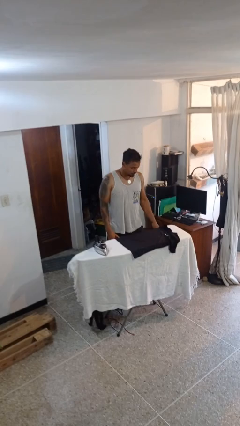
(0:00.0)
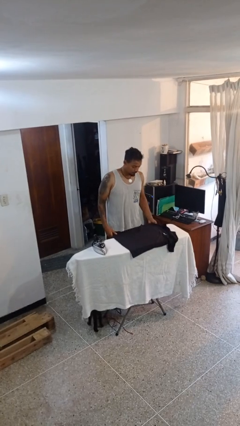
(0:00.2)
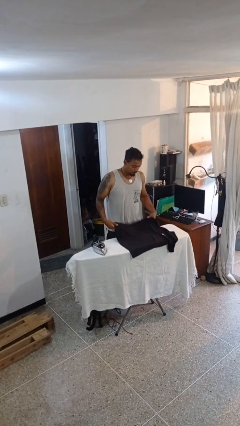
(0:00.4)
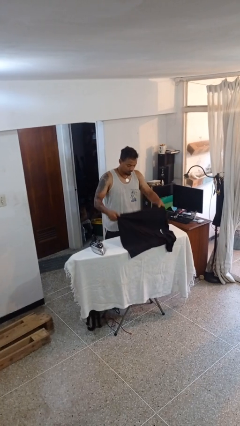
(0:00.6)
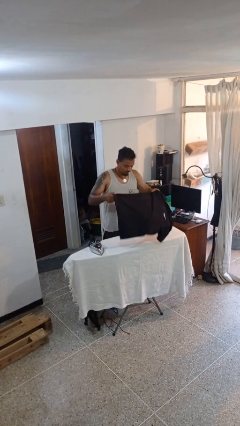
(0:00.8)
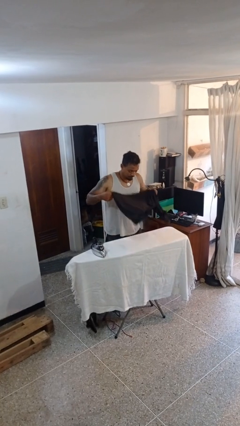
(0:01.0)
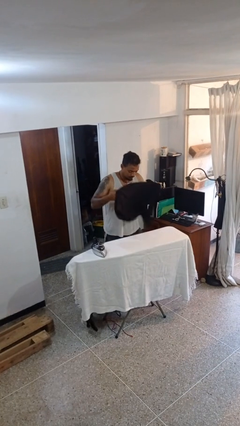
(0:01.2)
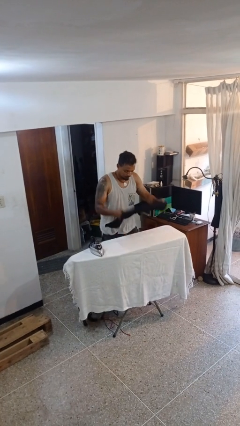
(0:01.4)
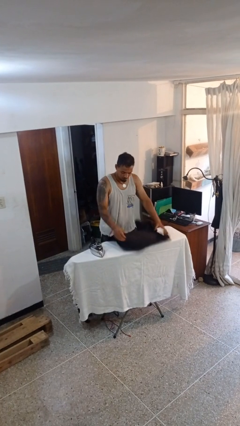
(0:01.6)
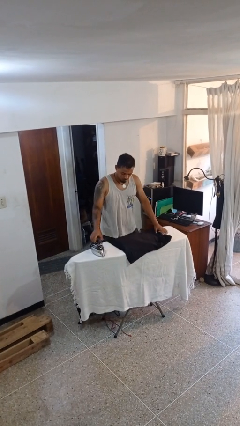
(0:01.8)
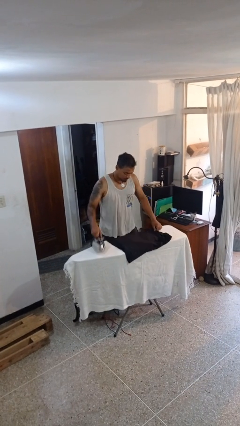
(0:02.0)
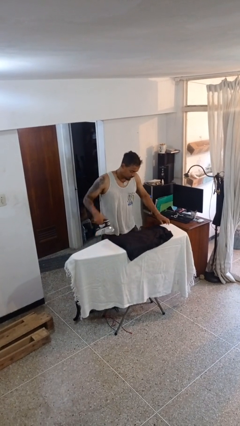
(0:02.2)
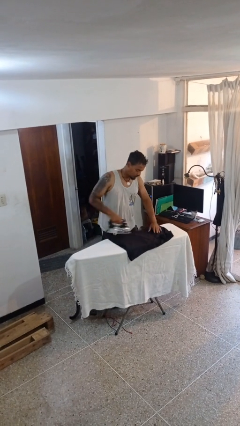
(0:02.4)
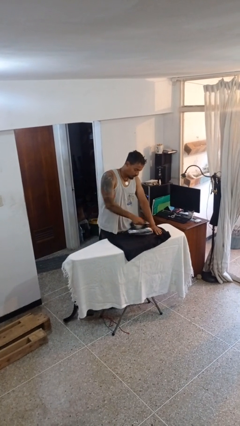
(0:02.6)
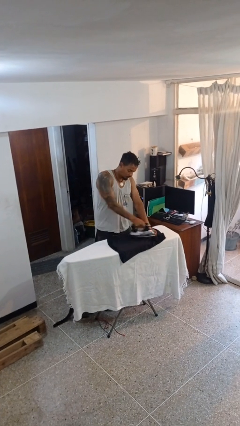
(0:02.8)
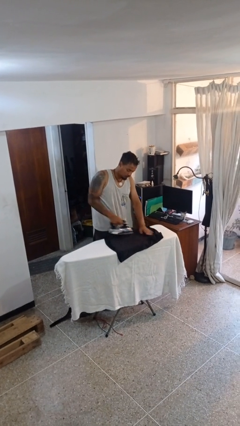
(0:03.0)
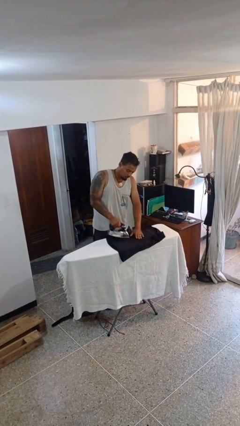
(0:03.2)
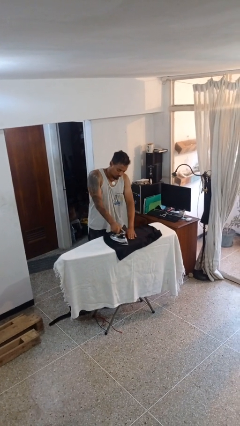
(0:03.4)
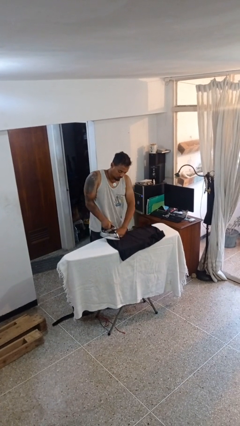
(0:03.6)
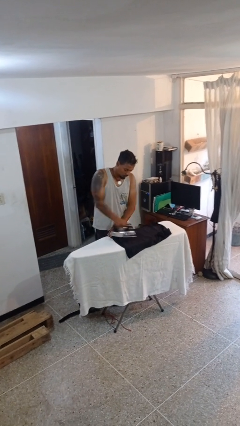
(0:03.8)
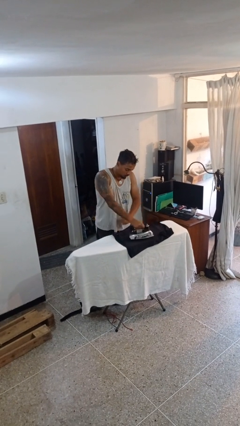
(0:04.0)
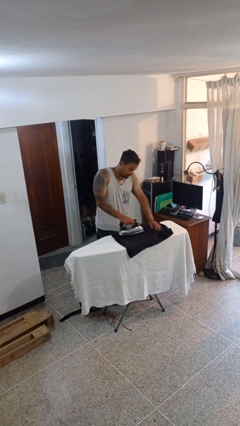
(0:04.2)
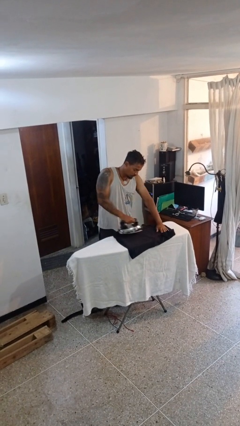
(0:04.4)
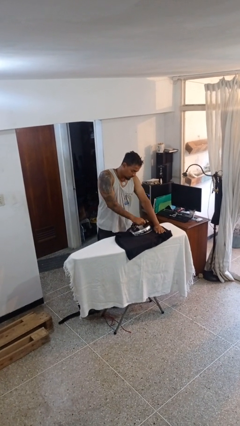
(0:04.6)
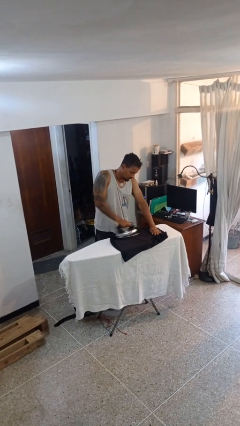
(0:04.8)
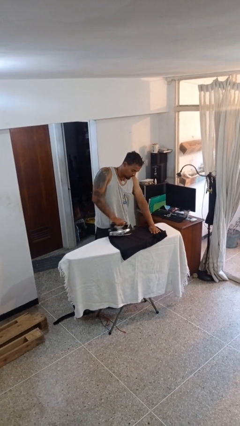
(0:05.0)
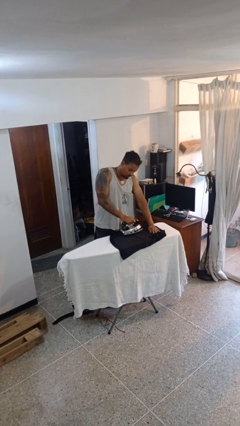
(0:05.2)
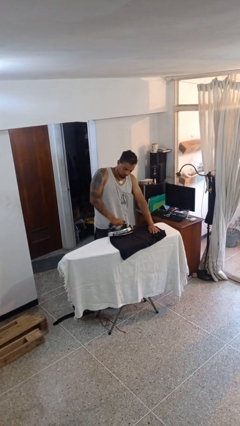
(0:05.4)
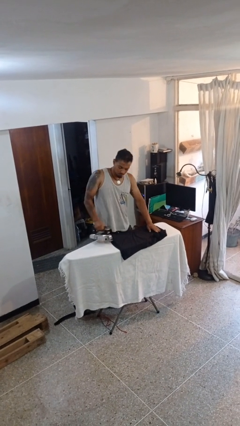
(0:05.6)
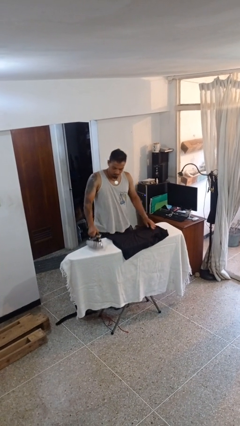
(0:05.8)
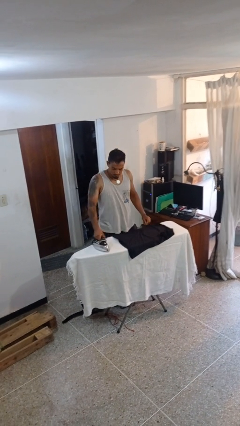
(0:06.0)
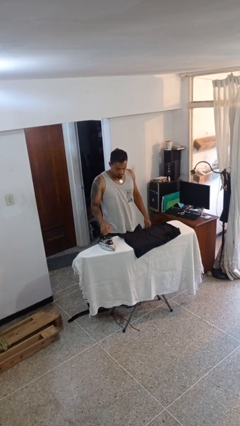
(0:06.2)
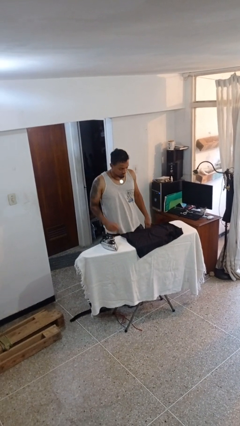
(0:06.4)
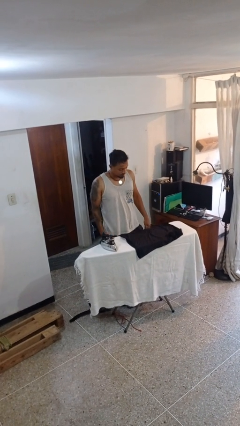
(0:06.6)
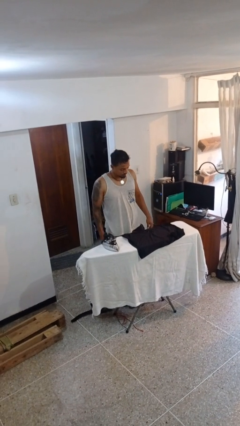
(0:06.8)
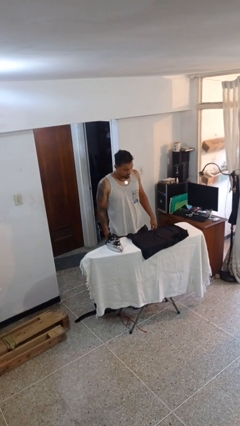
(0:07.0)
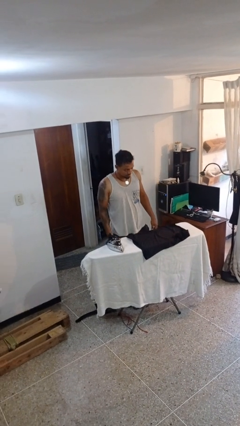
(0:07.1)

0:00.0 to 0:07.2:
person irons clothes

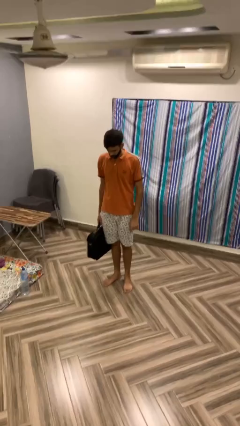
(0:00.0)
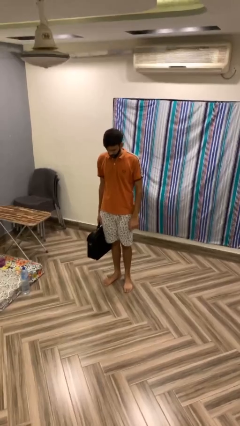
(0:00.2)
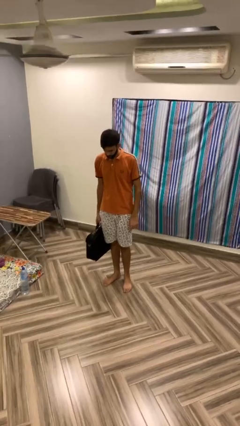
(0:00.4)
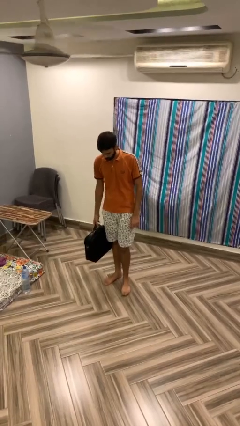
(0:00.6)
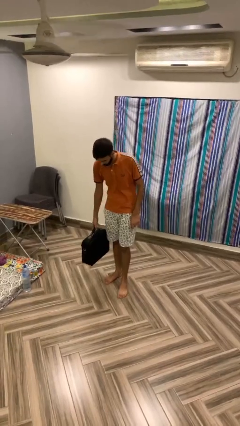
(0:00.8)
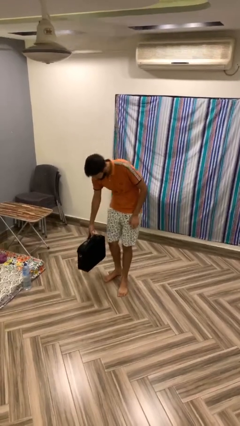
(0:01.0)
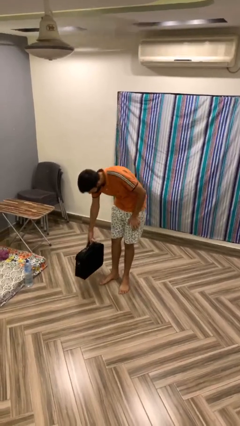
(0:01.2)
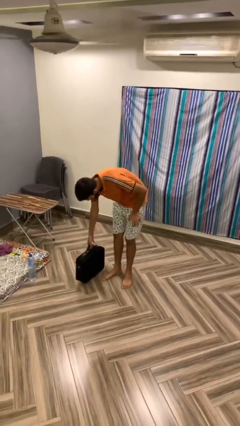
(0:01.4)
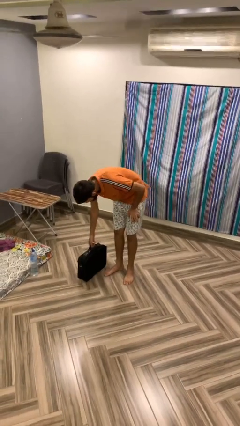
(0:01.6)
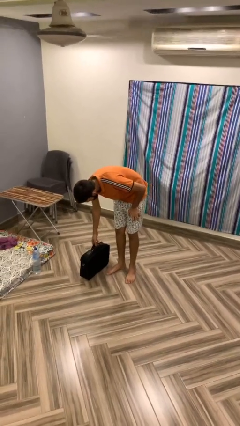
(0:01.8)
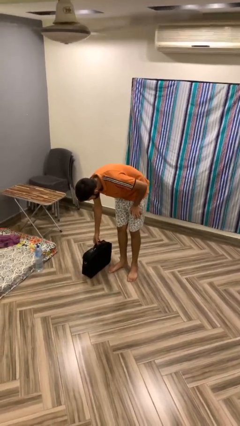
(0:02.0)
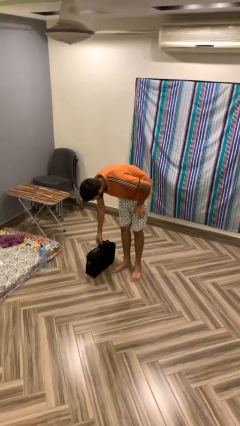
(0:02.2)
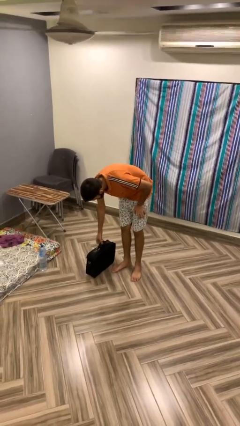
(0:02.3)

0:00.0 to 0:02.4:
person puts down object on floor

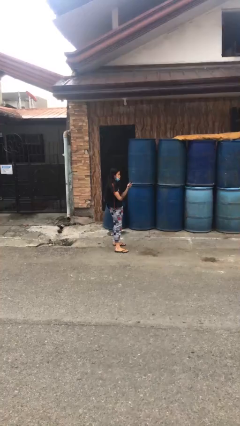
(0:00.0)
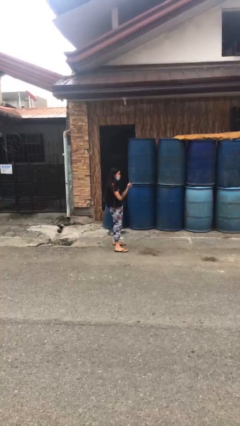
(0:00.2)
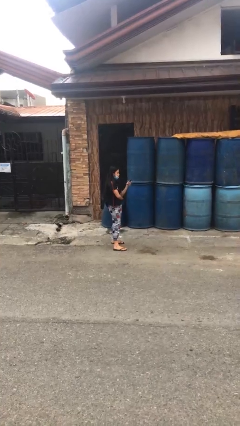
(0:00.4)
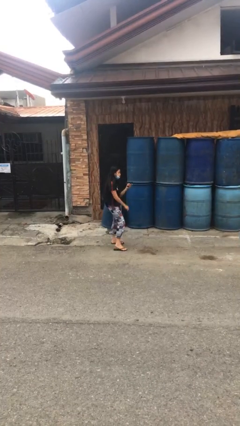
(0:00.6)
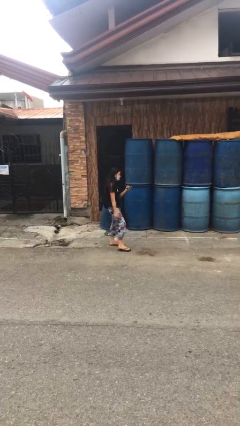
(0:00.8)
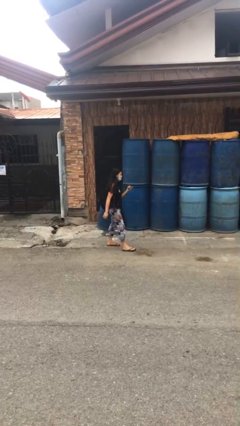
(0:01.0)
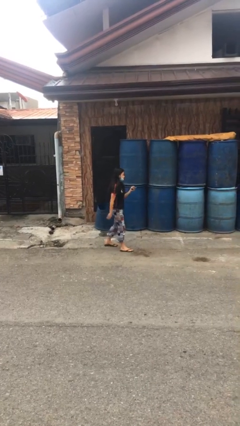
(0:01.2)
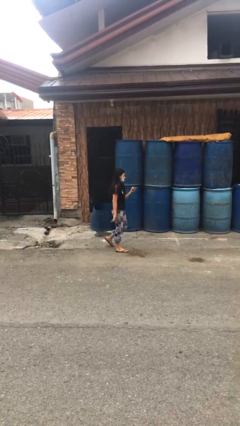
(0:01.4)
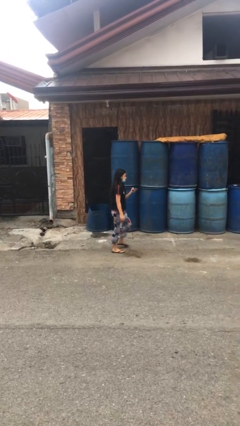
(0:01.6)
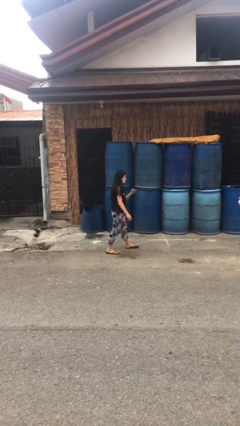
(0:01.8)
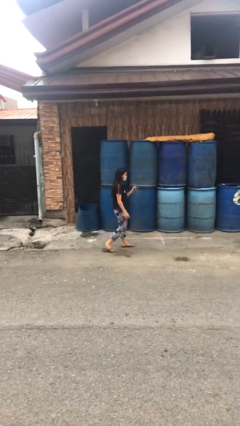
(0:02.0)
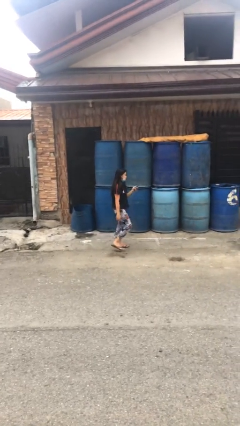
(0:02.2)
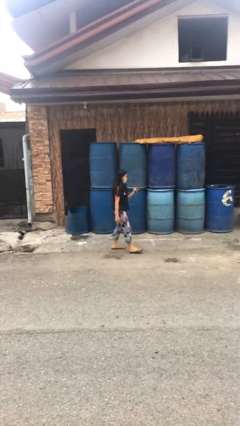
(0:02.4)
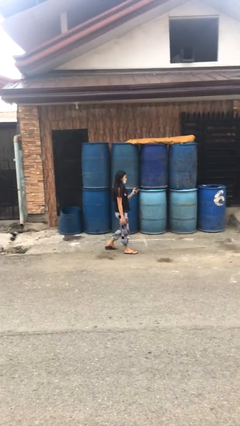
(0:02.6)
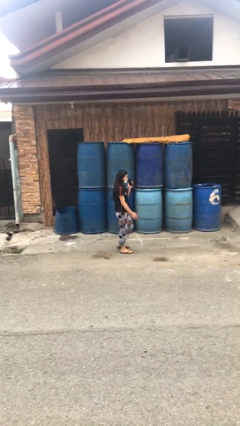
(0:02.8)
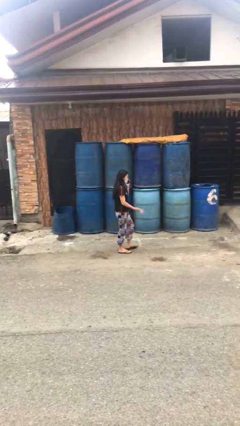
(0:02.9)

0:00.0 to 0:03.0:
person texts on phone

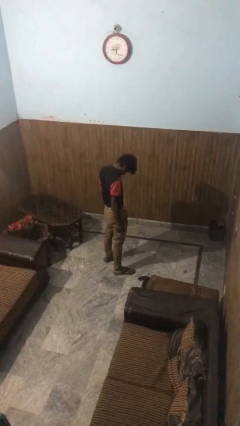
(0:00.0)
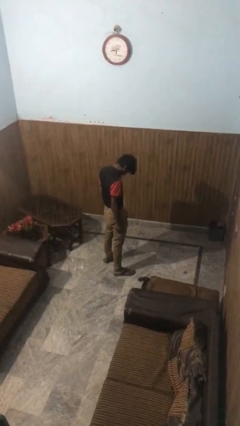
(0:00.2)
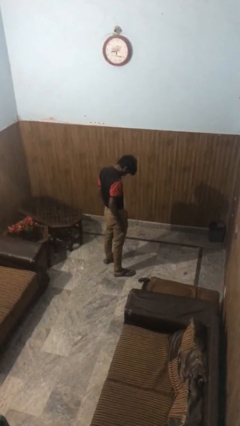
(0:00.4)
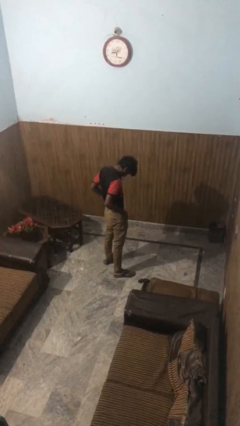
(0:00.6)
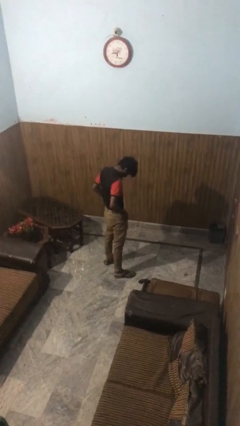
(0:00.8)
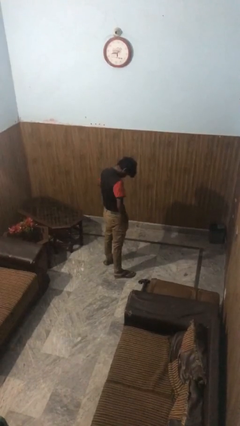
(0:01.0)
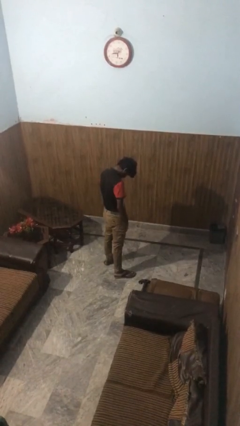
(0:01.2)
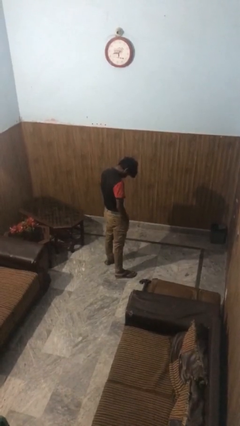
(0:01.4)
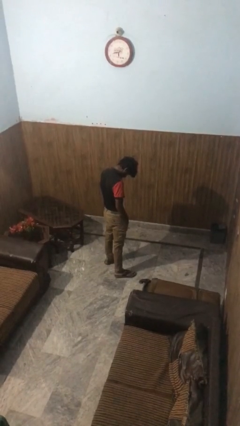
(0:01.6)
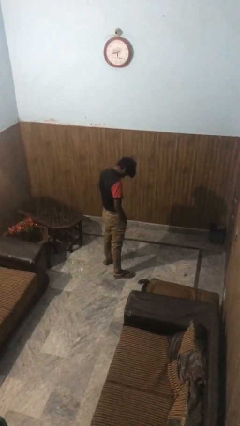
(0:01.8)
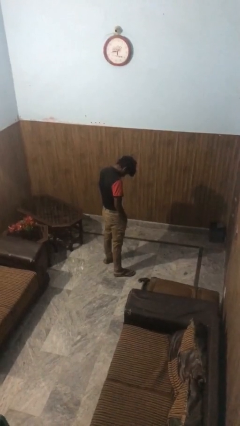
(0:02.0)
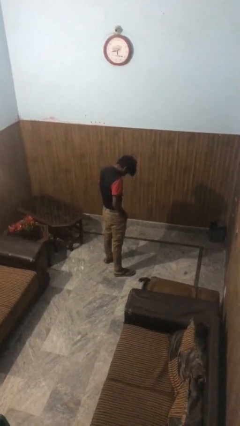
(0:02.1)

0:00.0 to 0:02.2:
person puts hands in back pockets

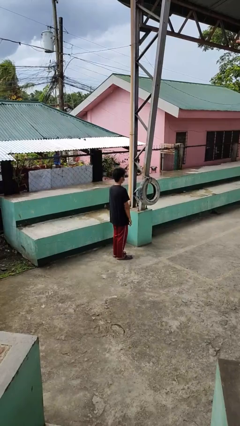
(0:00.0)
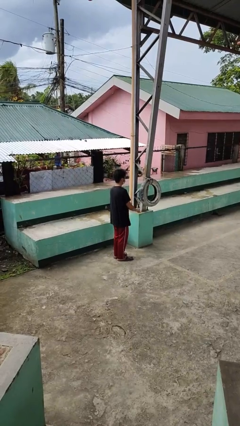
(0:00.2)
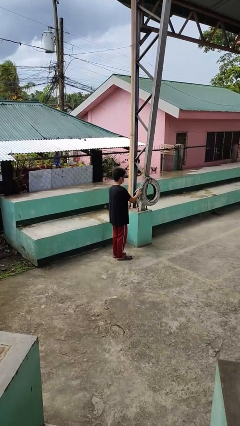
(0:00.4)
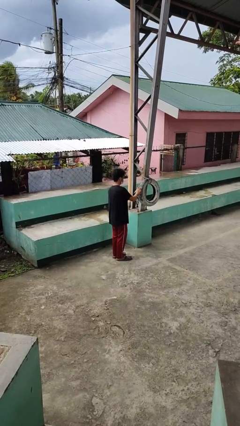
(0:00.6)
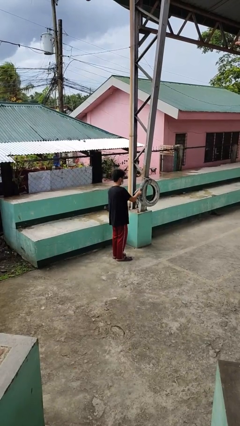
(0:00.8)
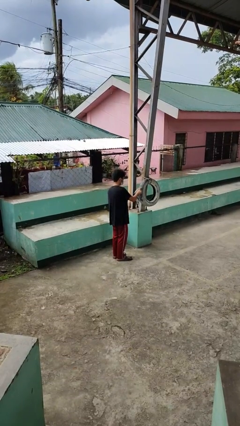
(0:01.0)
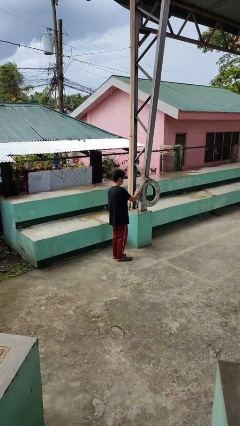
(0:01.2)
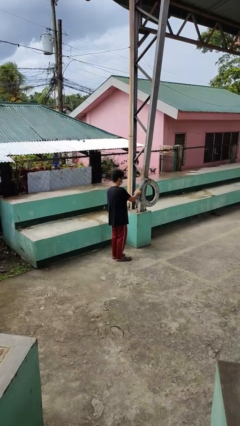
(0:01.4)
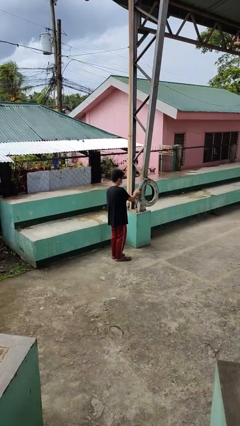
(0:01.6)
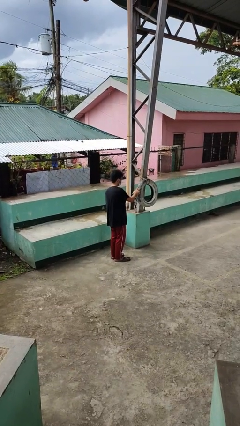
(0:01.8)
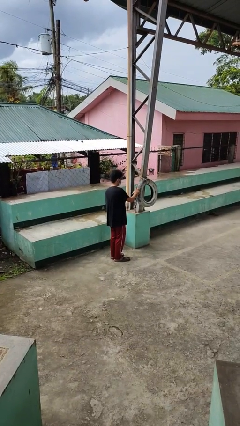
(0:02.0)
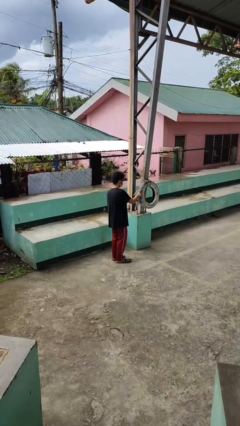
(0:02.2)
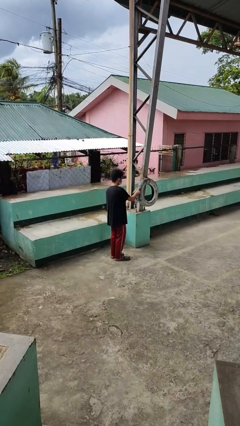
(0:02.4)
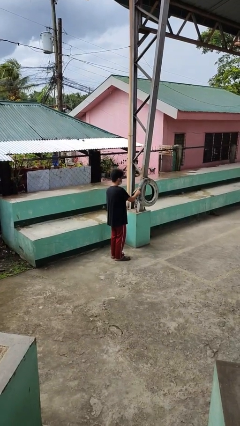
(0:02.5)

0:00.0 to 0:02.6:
person taps object with finger
